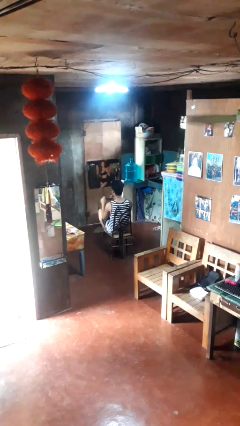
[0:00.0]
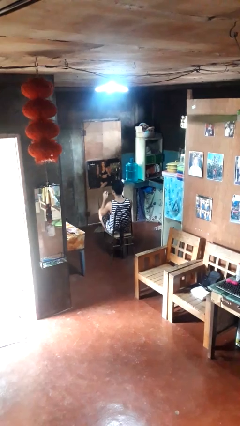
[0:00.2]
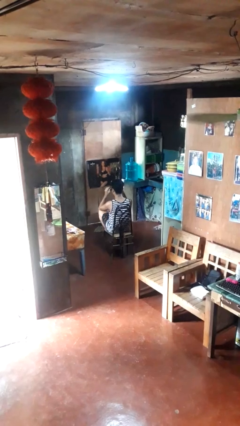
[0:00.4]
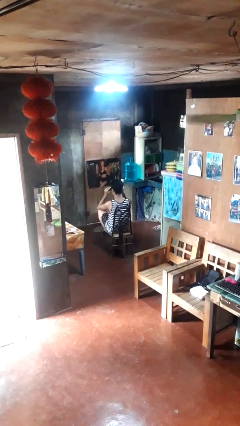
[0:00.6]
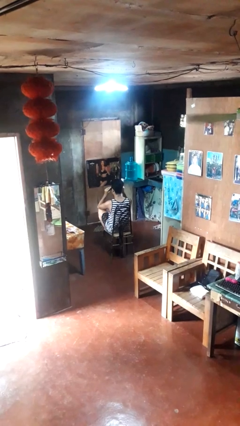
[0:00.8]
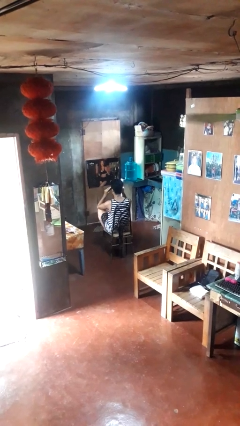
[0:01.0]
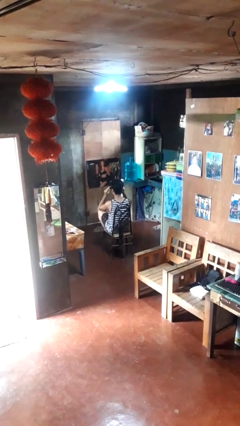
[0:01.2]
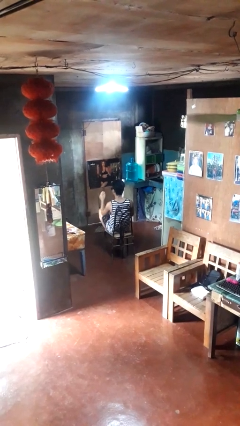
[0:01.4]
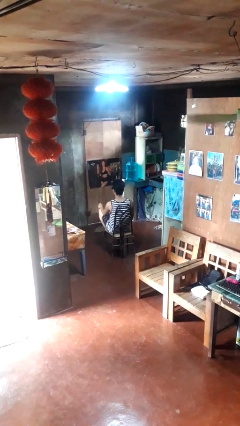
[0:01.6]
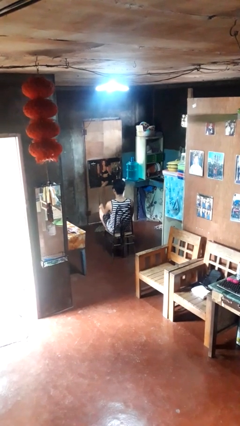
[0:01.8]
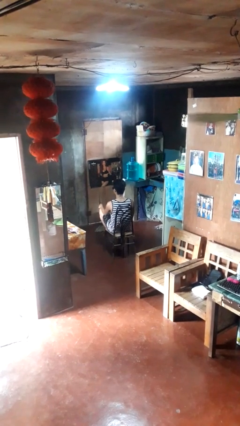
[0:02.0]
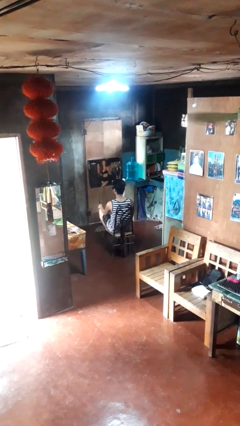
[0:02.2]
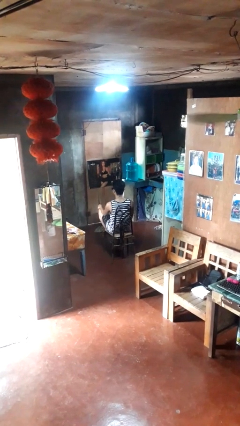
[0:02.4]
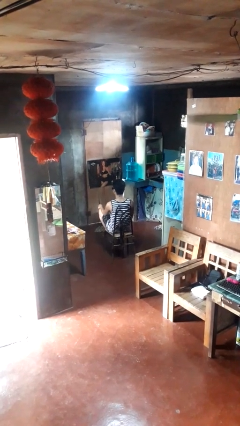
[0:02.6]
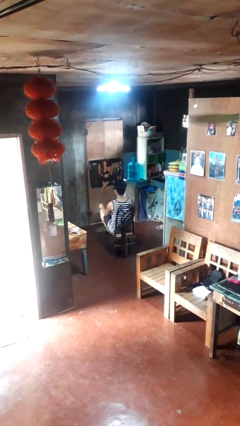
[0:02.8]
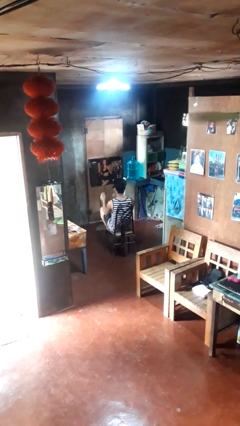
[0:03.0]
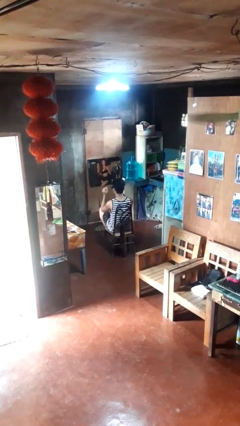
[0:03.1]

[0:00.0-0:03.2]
person puts on sunglasses

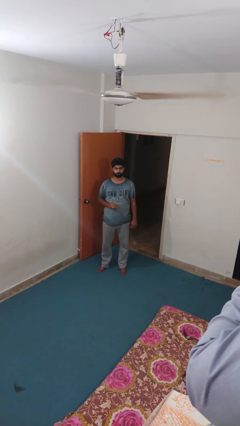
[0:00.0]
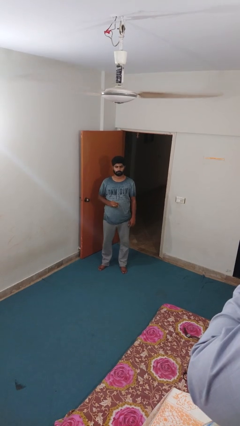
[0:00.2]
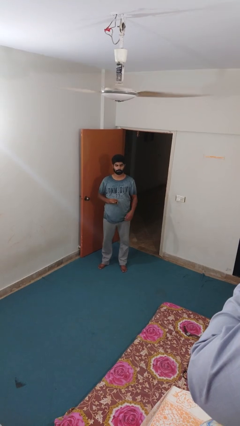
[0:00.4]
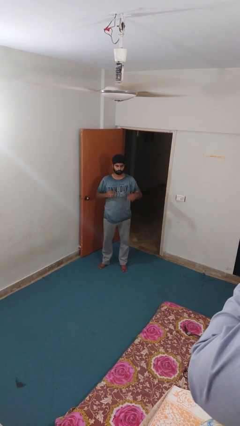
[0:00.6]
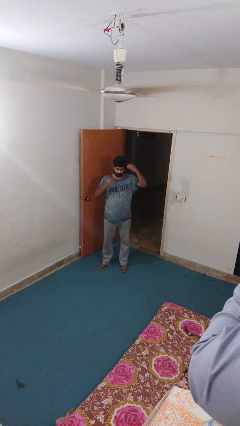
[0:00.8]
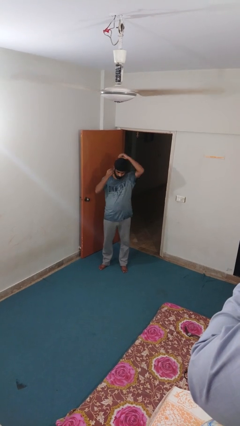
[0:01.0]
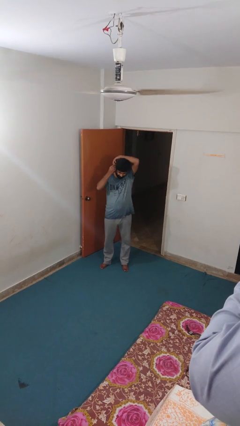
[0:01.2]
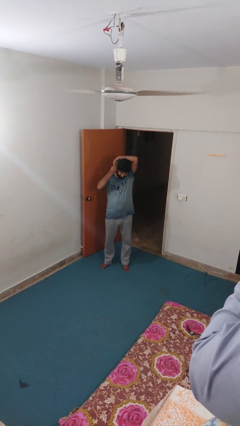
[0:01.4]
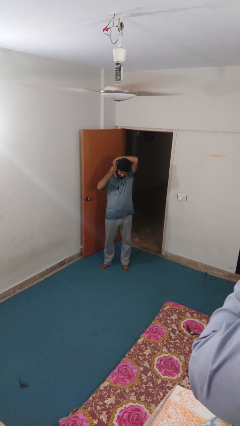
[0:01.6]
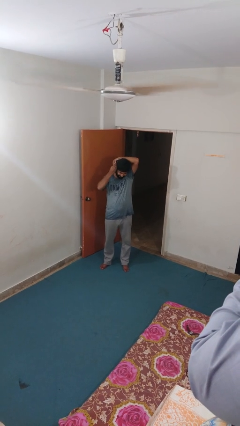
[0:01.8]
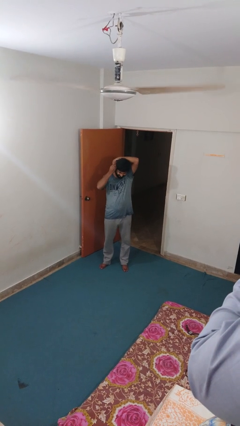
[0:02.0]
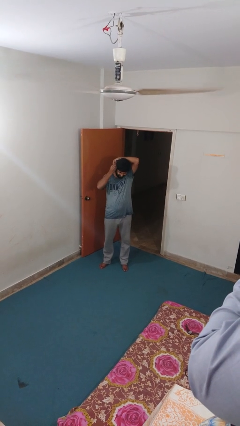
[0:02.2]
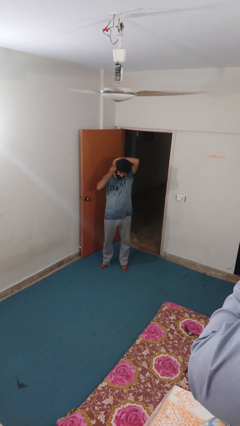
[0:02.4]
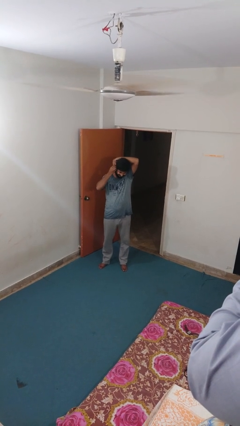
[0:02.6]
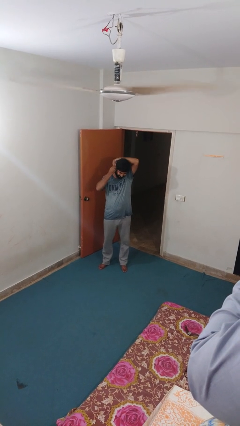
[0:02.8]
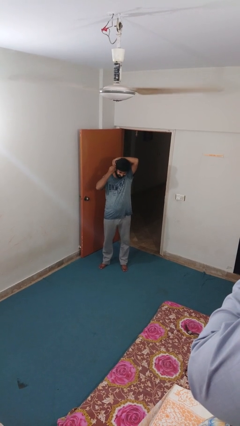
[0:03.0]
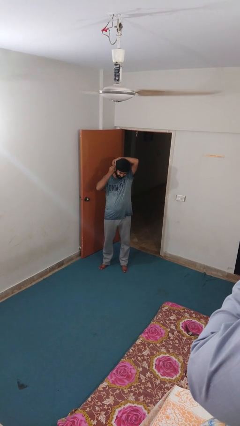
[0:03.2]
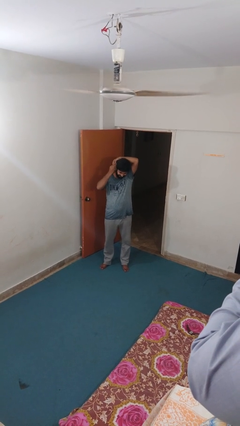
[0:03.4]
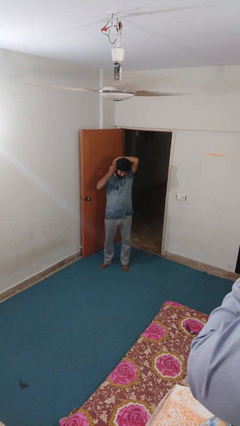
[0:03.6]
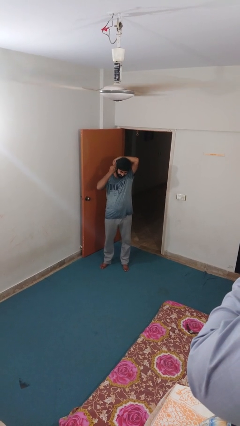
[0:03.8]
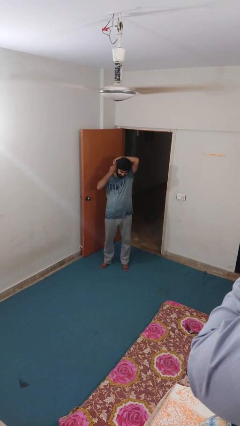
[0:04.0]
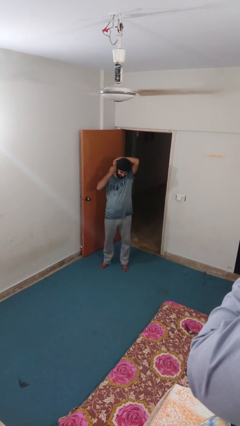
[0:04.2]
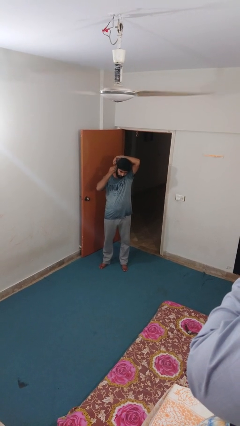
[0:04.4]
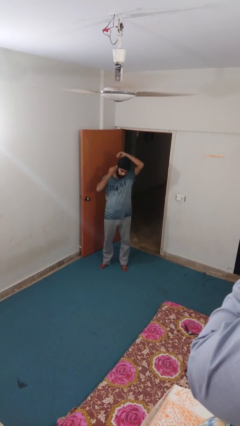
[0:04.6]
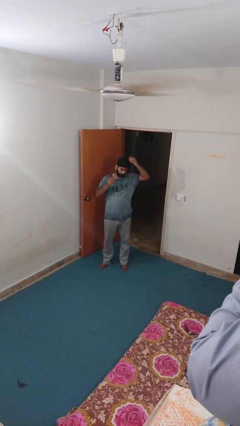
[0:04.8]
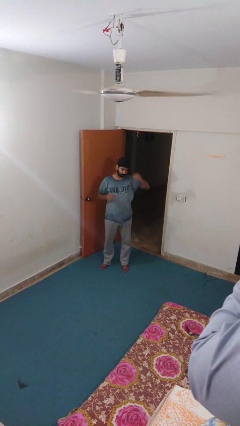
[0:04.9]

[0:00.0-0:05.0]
person puts on earrings

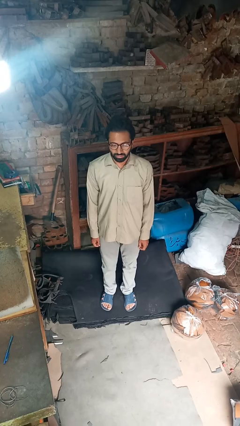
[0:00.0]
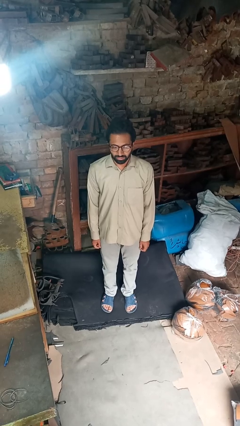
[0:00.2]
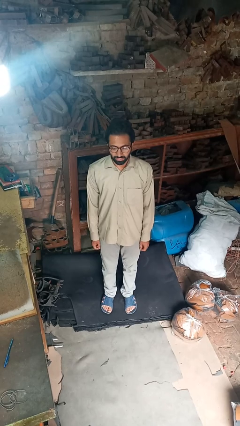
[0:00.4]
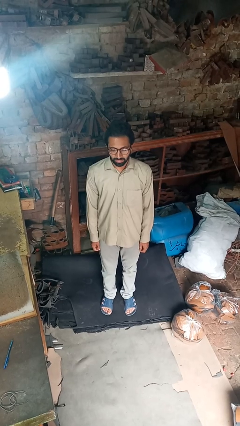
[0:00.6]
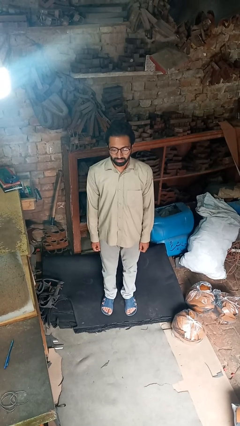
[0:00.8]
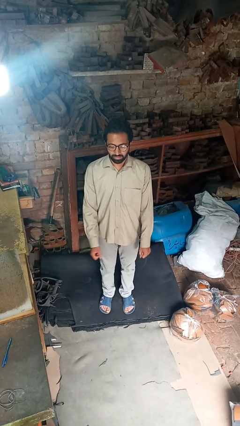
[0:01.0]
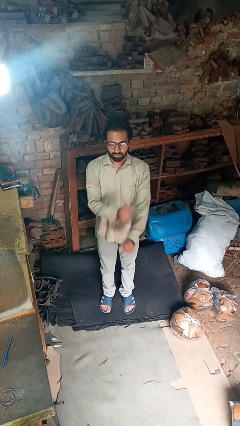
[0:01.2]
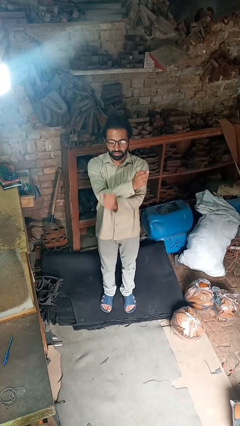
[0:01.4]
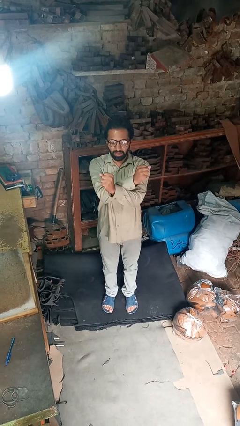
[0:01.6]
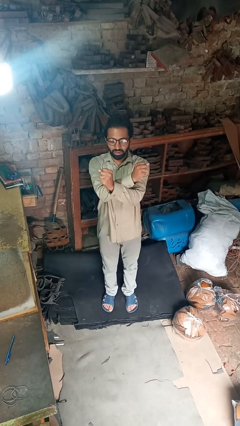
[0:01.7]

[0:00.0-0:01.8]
person crosses arms

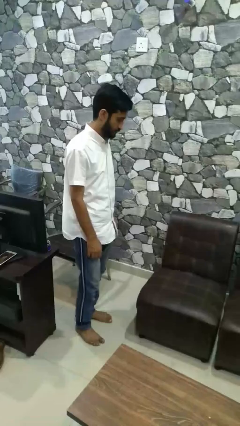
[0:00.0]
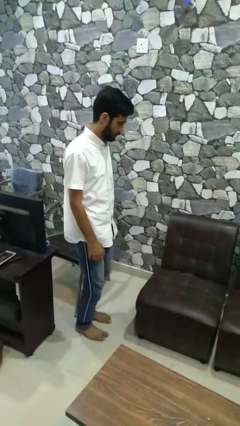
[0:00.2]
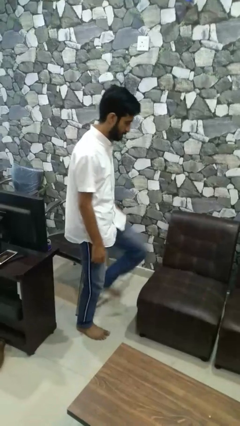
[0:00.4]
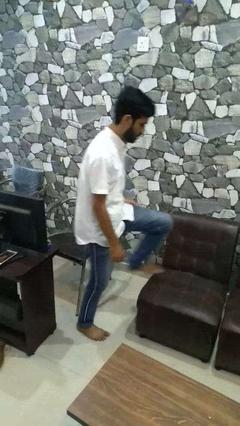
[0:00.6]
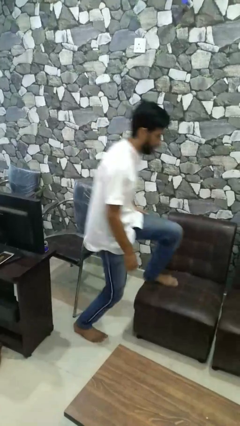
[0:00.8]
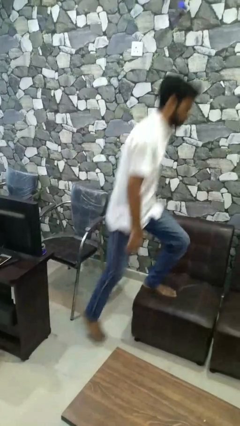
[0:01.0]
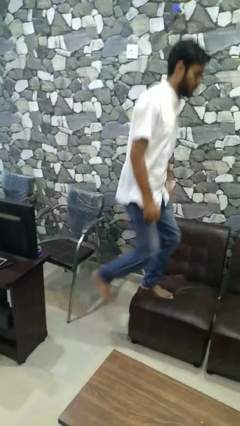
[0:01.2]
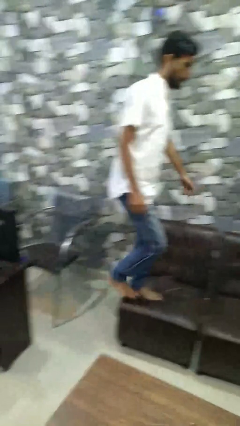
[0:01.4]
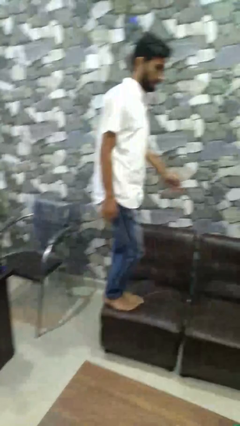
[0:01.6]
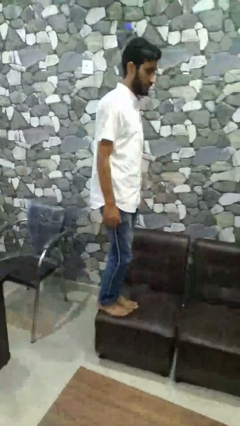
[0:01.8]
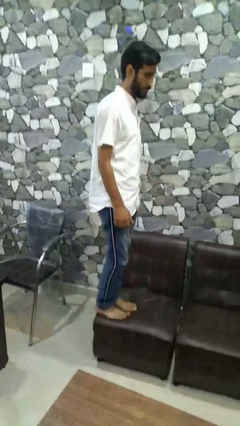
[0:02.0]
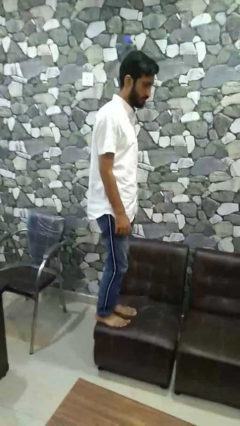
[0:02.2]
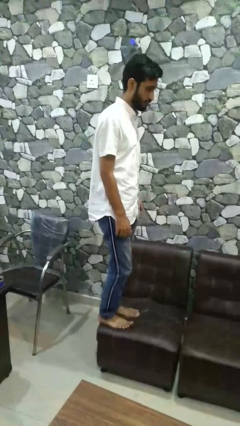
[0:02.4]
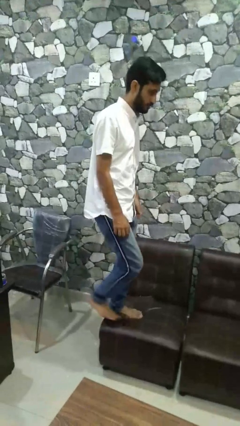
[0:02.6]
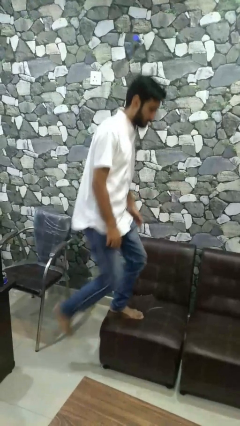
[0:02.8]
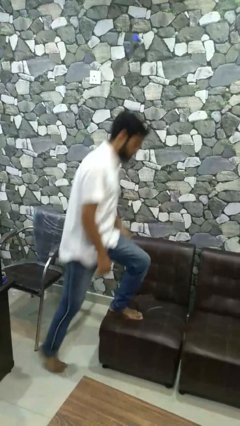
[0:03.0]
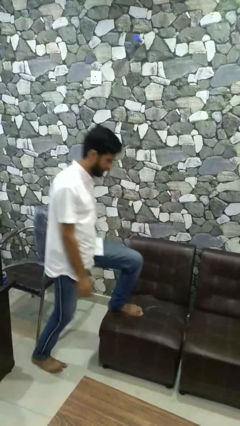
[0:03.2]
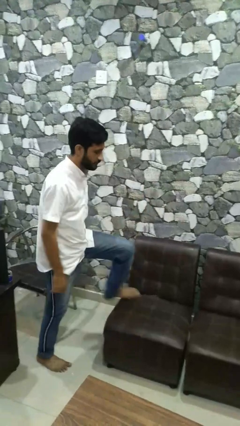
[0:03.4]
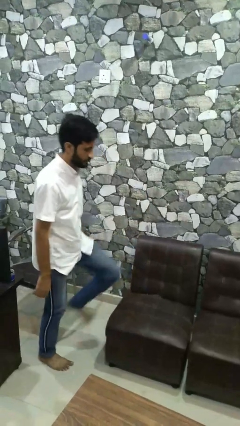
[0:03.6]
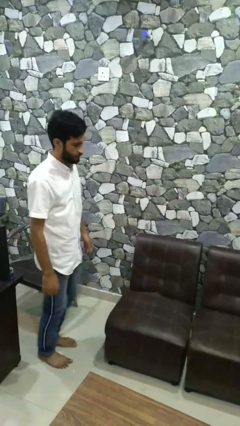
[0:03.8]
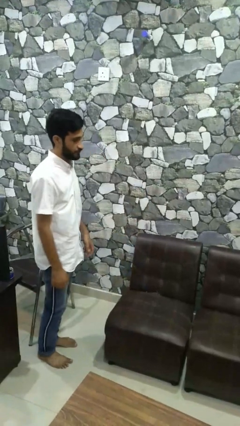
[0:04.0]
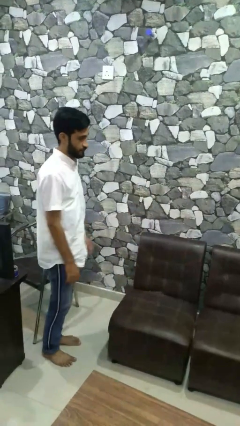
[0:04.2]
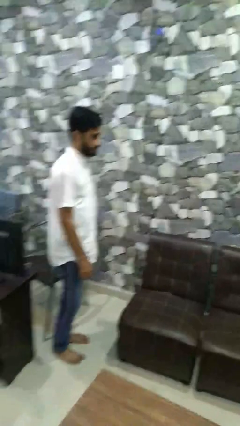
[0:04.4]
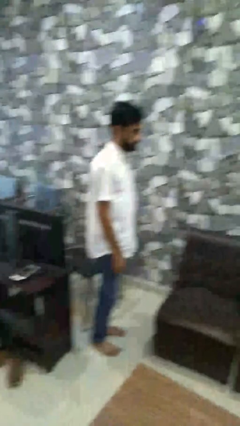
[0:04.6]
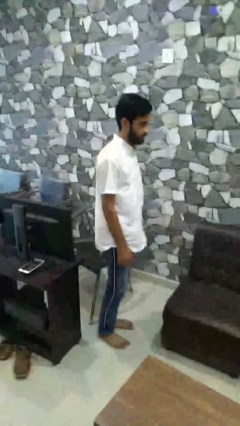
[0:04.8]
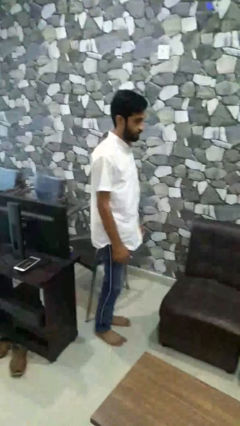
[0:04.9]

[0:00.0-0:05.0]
person jumps on couch

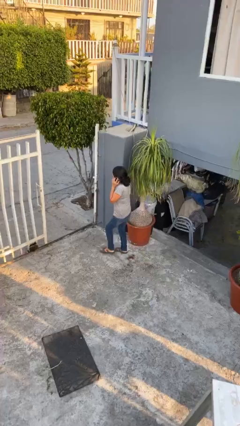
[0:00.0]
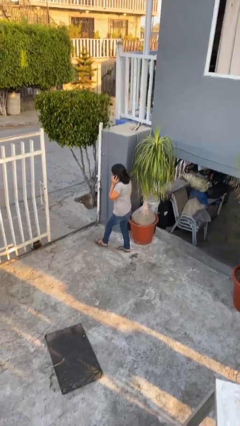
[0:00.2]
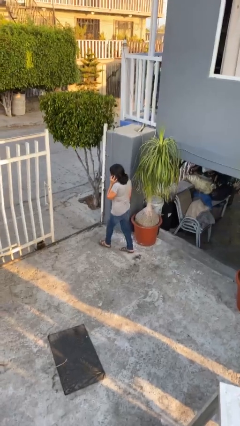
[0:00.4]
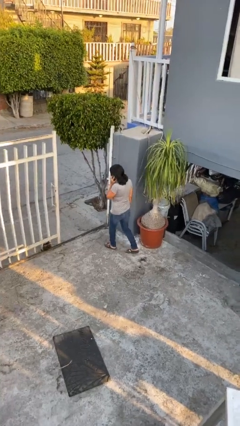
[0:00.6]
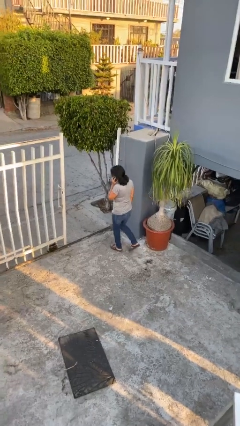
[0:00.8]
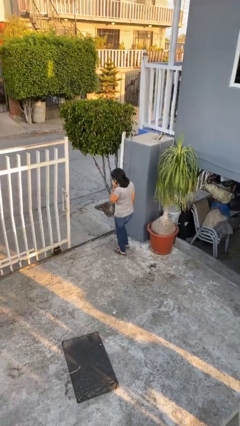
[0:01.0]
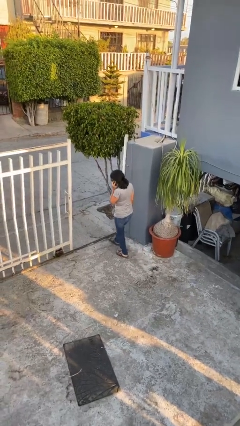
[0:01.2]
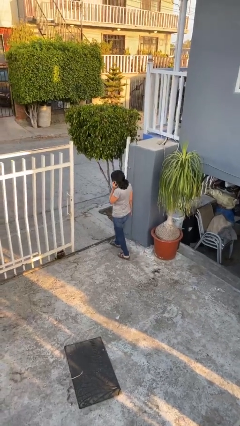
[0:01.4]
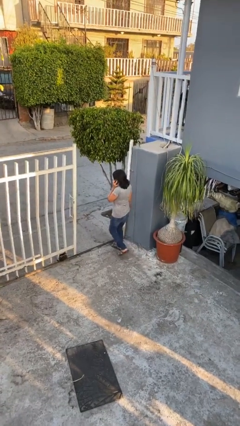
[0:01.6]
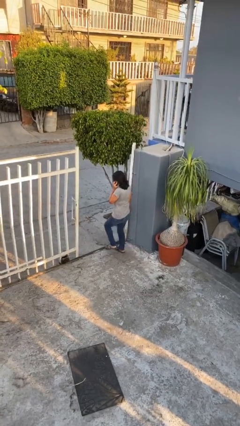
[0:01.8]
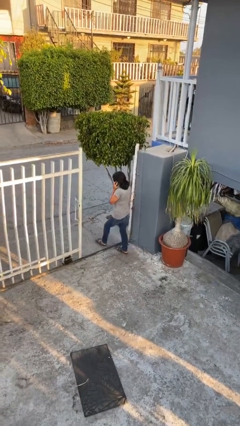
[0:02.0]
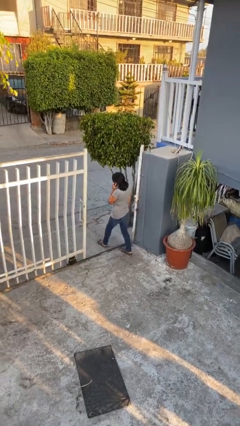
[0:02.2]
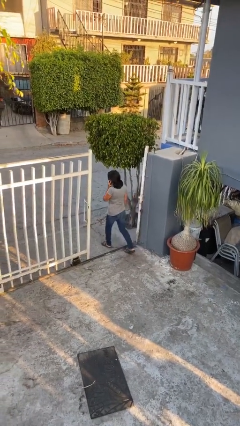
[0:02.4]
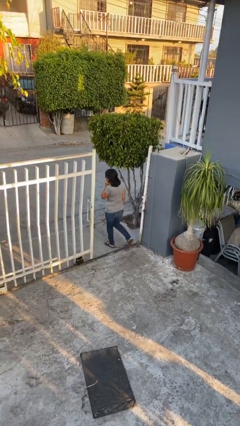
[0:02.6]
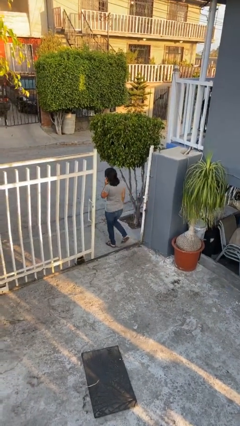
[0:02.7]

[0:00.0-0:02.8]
person exits scene through structure
